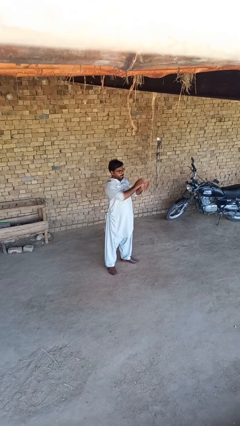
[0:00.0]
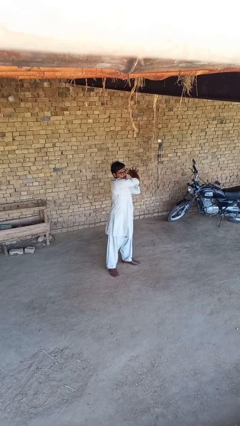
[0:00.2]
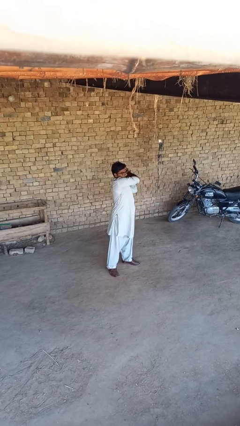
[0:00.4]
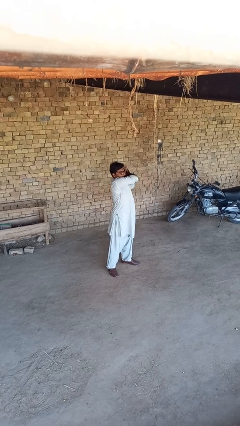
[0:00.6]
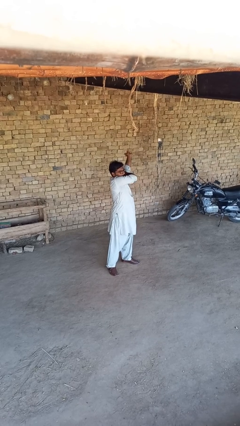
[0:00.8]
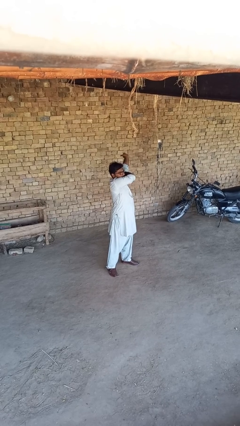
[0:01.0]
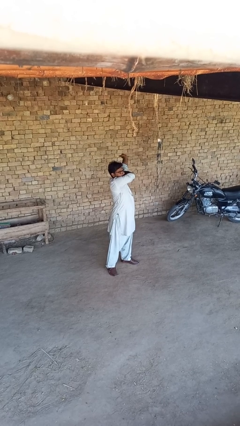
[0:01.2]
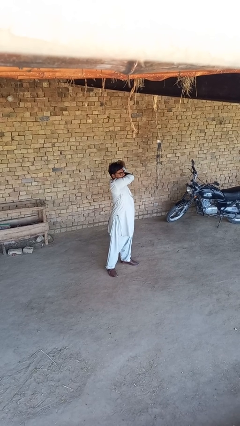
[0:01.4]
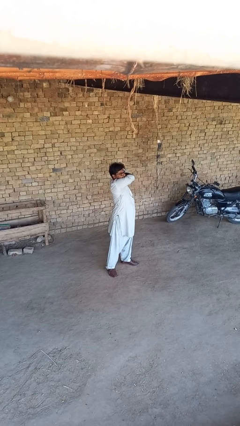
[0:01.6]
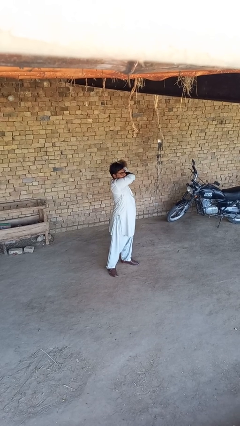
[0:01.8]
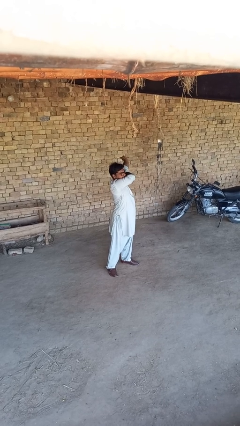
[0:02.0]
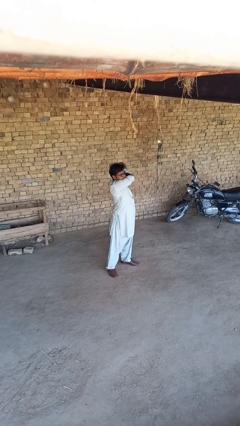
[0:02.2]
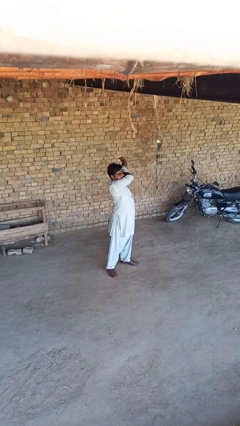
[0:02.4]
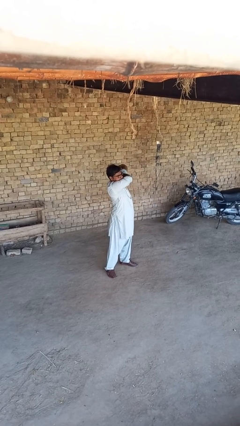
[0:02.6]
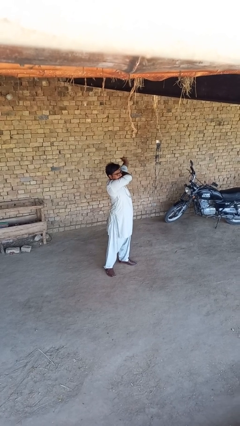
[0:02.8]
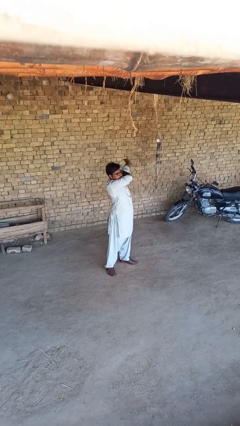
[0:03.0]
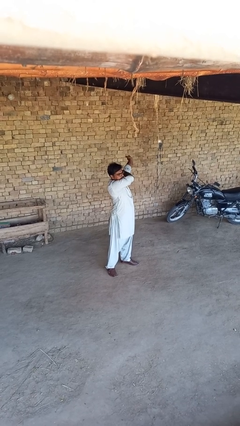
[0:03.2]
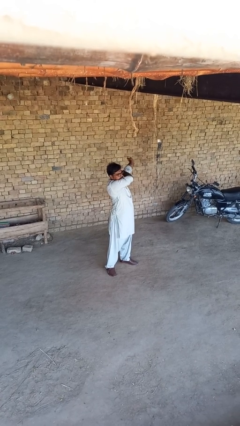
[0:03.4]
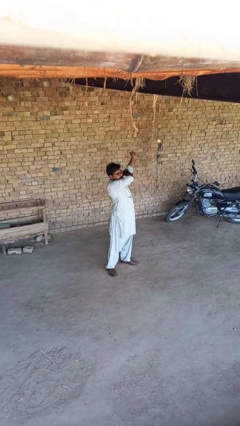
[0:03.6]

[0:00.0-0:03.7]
person stretches arms to side

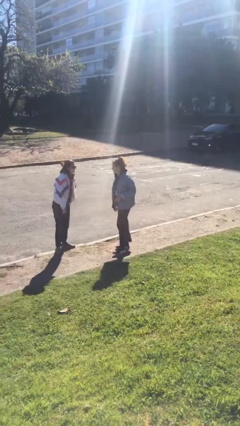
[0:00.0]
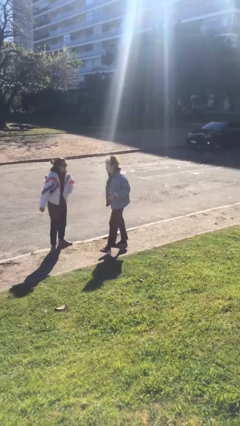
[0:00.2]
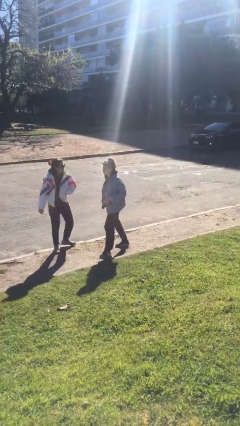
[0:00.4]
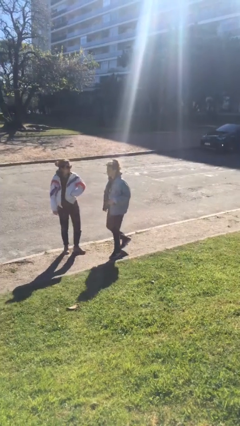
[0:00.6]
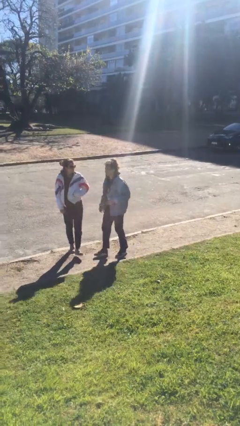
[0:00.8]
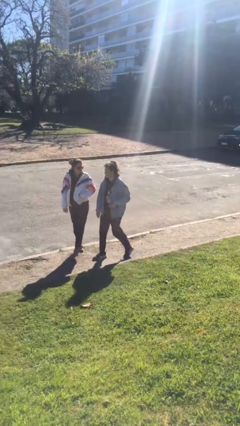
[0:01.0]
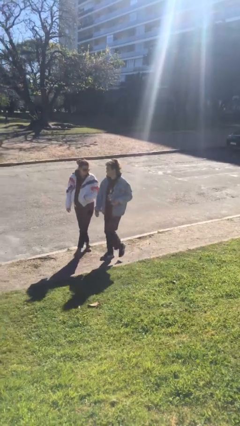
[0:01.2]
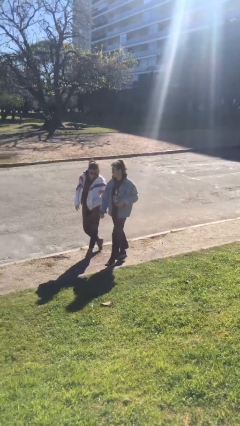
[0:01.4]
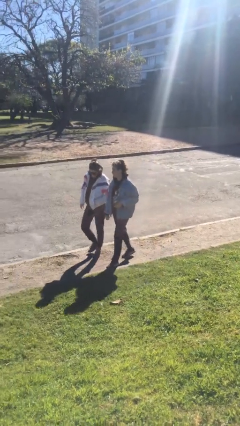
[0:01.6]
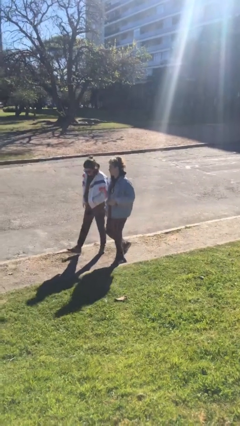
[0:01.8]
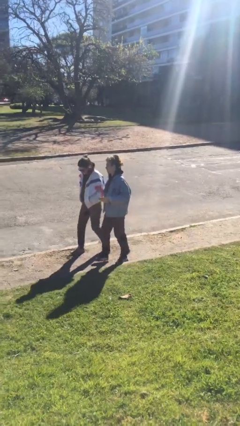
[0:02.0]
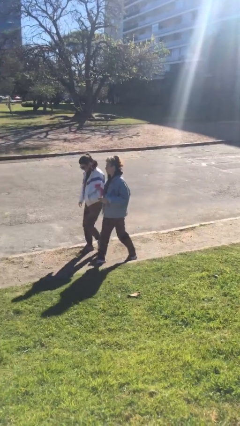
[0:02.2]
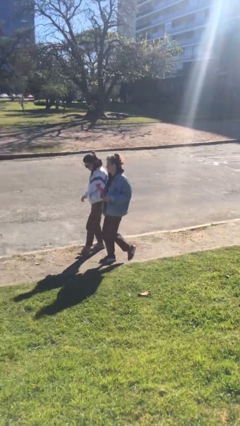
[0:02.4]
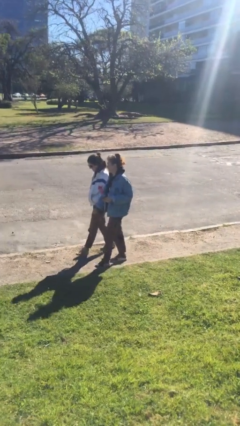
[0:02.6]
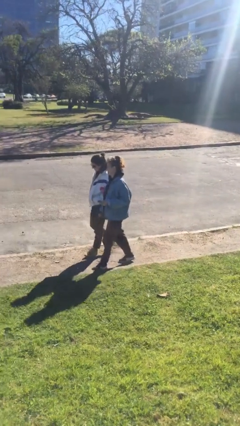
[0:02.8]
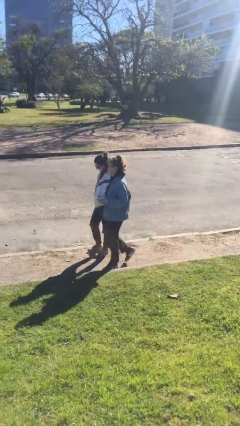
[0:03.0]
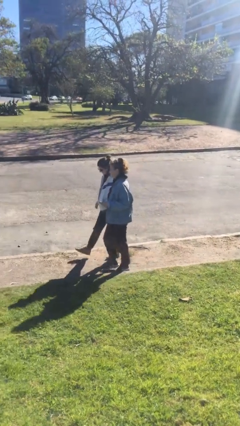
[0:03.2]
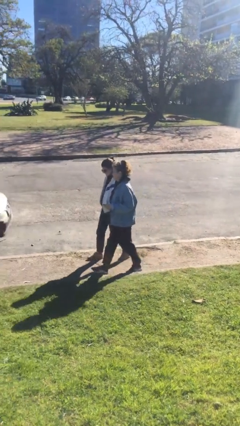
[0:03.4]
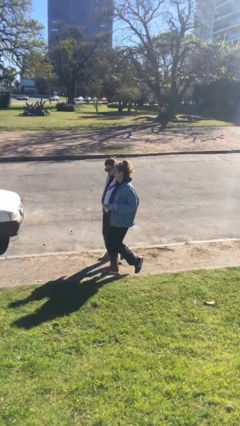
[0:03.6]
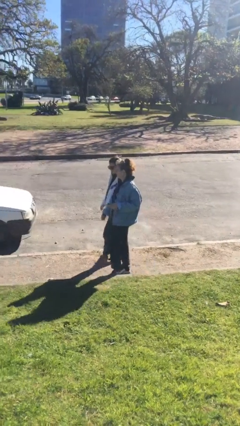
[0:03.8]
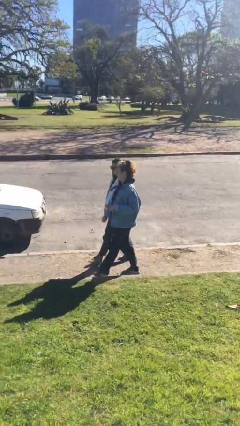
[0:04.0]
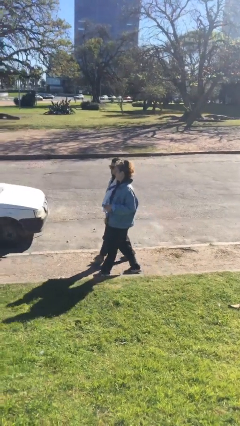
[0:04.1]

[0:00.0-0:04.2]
person talks to person

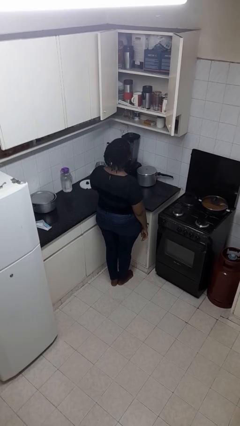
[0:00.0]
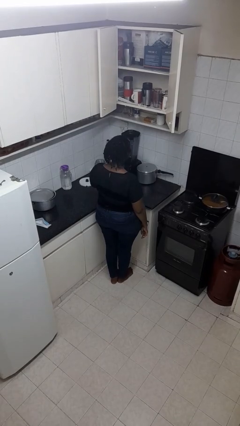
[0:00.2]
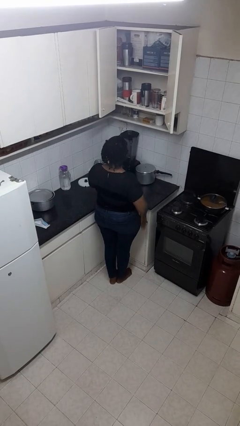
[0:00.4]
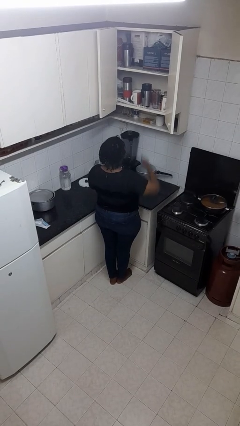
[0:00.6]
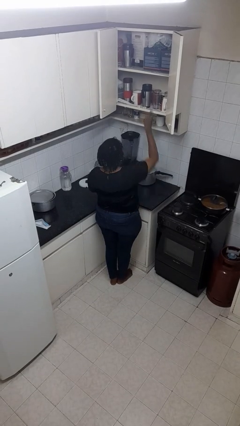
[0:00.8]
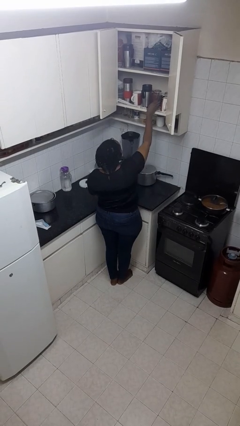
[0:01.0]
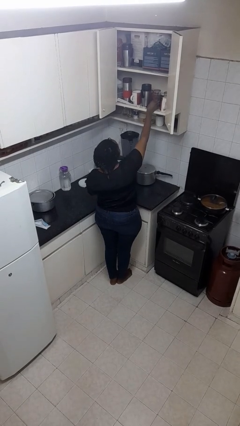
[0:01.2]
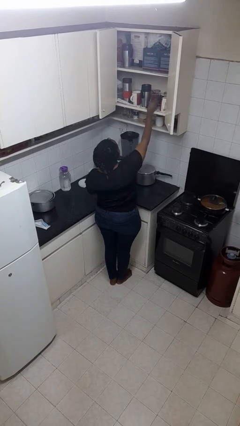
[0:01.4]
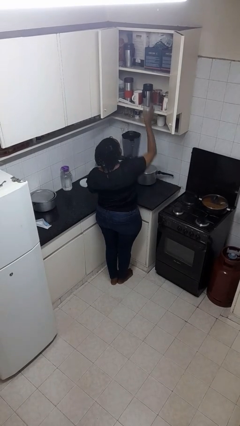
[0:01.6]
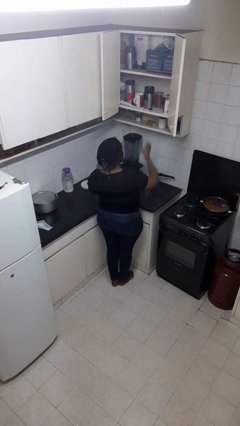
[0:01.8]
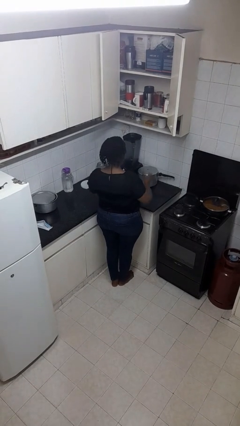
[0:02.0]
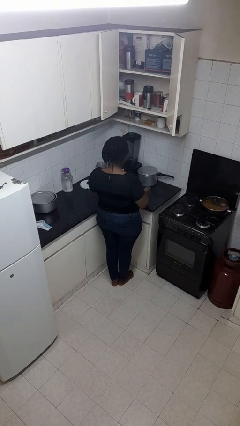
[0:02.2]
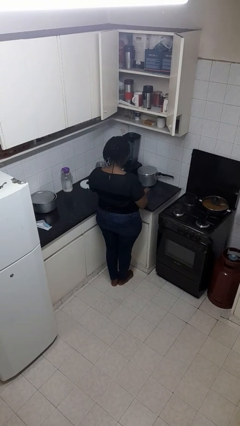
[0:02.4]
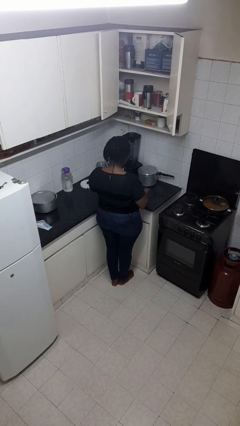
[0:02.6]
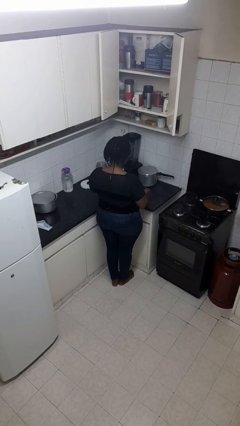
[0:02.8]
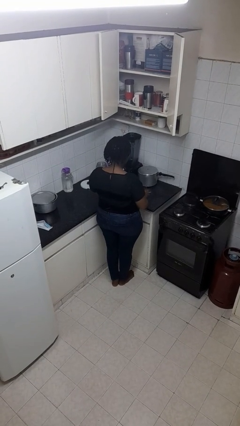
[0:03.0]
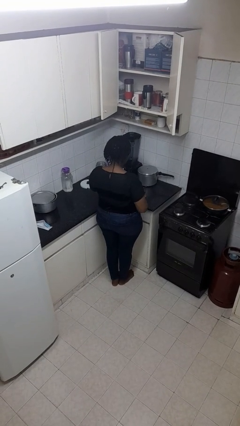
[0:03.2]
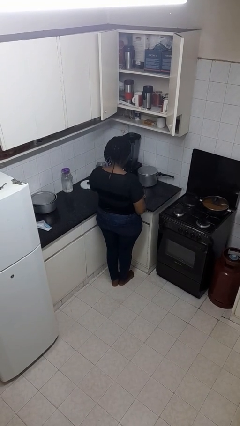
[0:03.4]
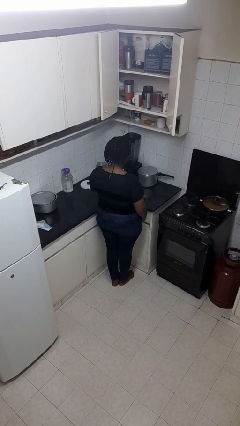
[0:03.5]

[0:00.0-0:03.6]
person takes object from cabinet

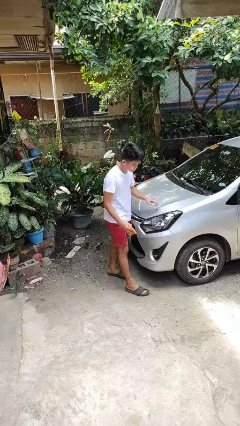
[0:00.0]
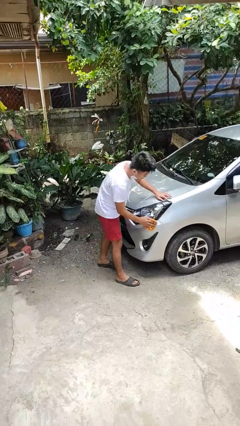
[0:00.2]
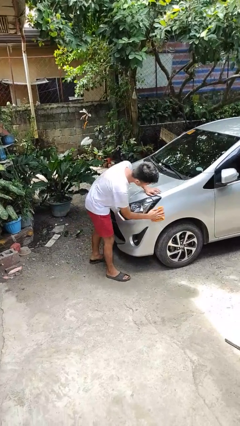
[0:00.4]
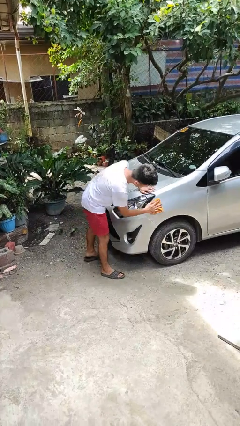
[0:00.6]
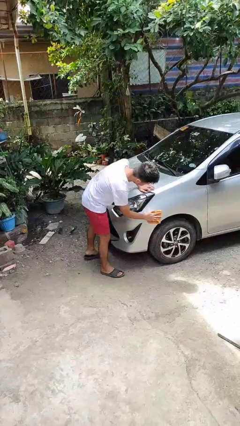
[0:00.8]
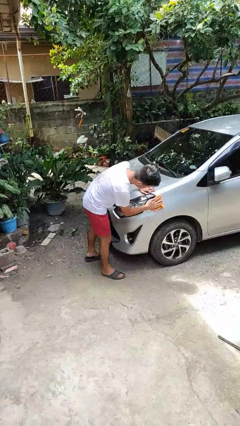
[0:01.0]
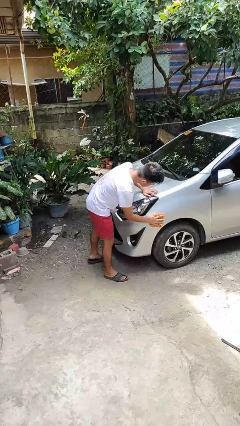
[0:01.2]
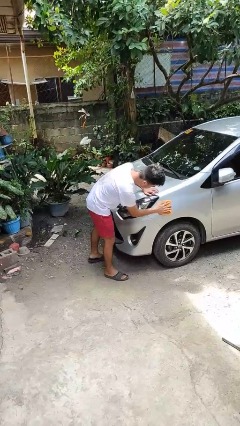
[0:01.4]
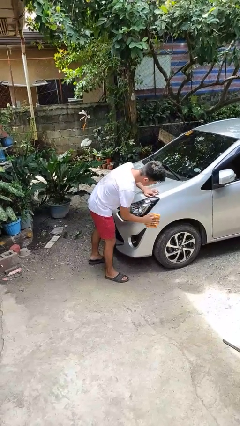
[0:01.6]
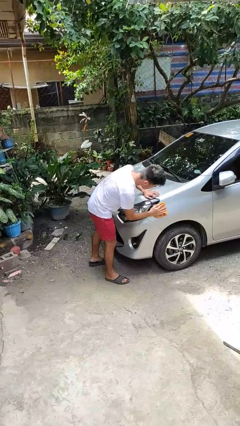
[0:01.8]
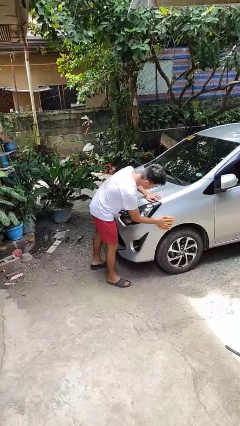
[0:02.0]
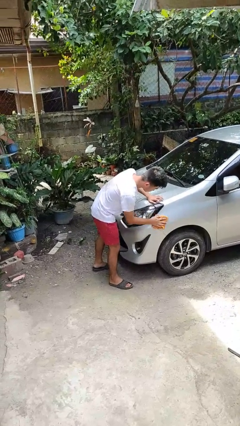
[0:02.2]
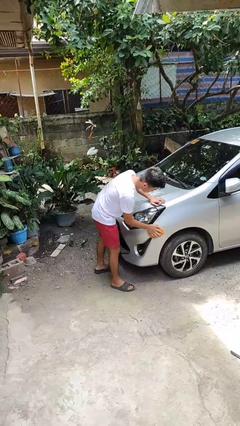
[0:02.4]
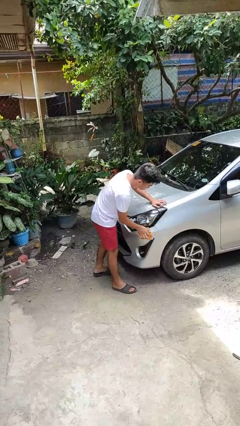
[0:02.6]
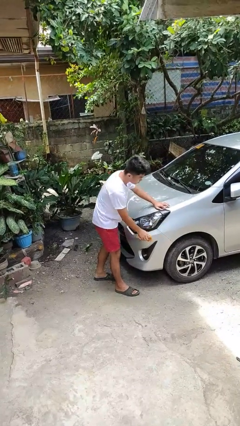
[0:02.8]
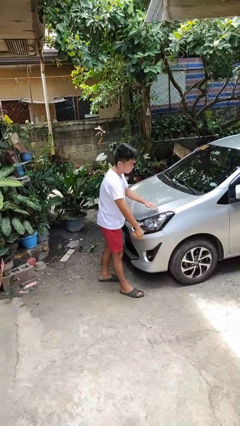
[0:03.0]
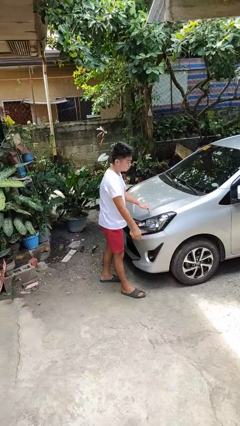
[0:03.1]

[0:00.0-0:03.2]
person polishes car with rag

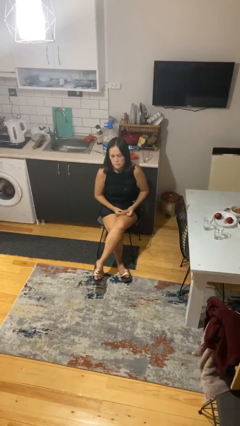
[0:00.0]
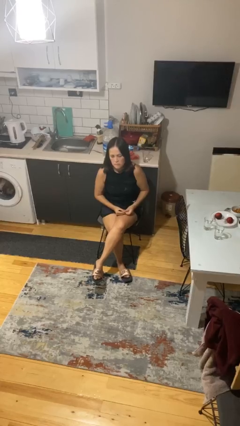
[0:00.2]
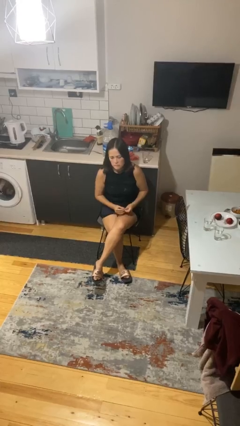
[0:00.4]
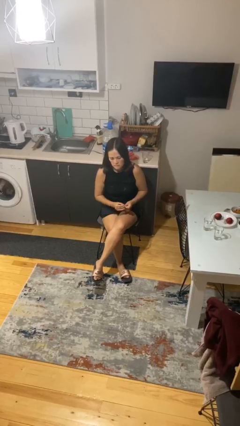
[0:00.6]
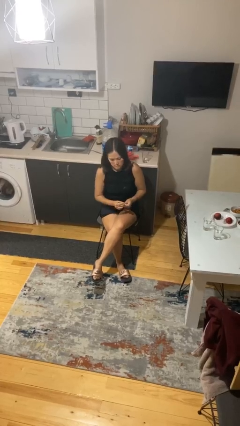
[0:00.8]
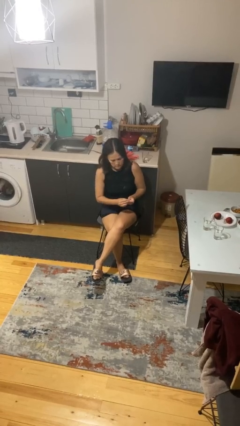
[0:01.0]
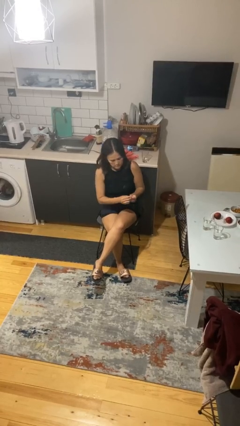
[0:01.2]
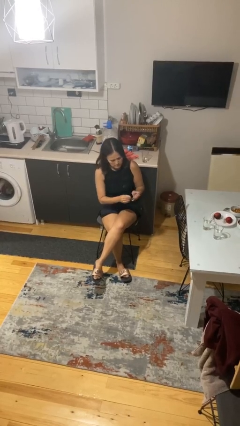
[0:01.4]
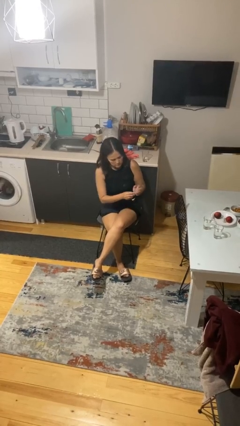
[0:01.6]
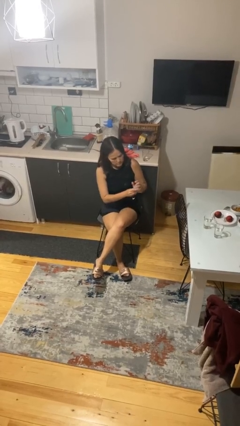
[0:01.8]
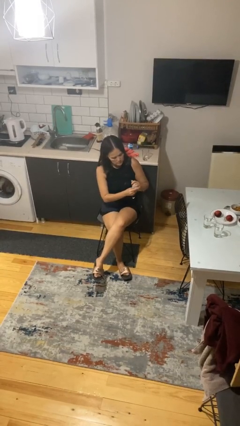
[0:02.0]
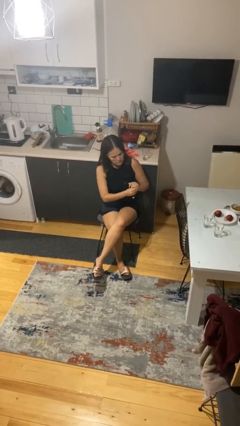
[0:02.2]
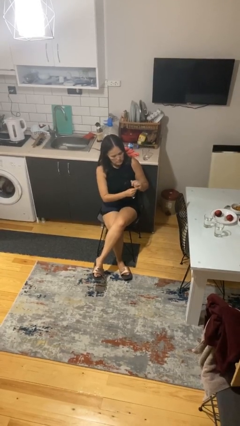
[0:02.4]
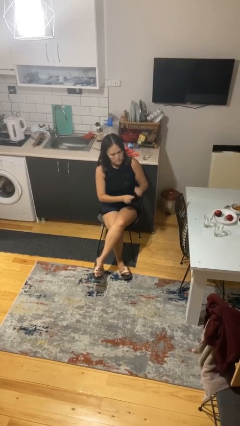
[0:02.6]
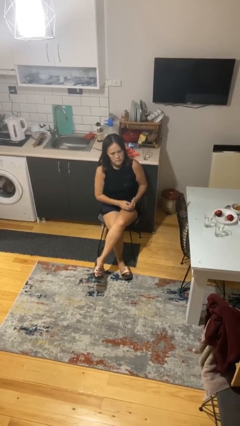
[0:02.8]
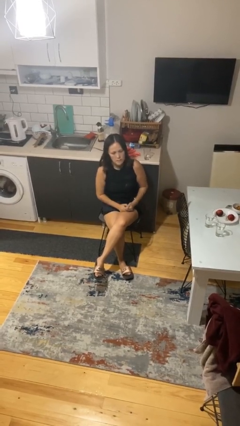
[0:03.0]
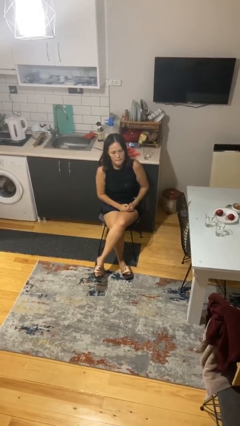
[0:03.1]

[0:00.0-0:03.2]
person puts on ring
